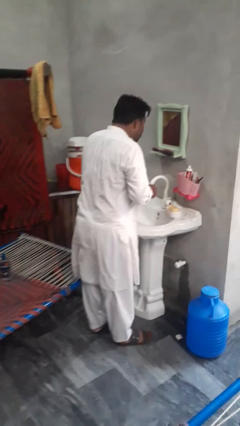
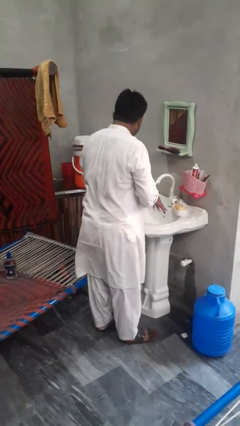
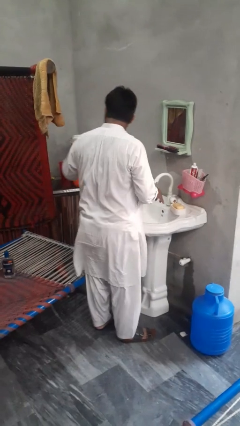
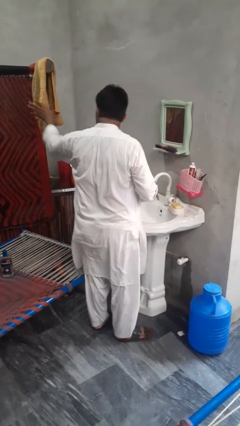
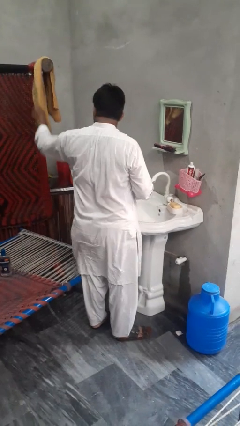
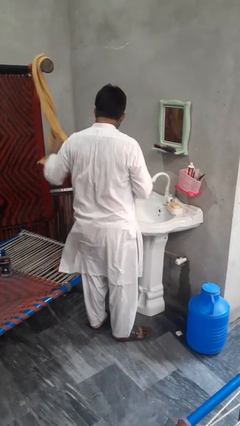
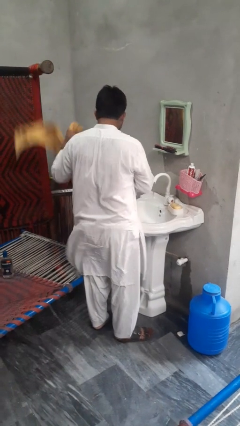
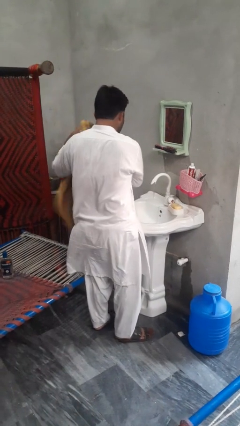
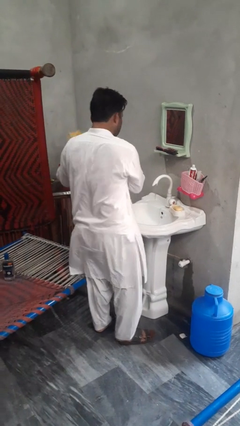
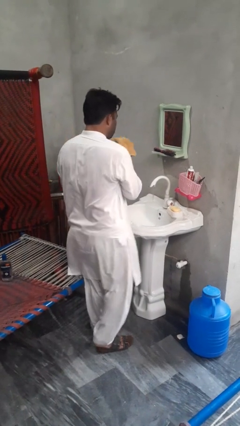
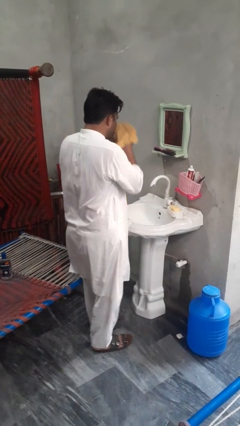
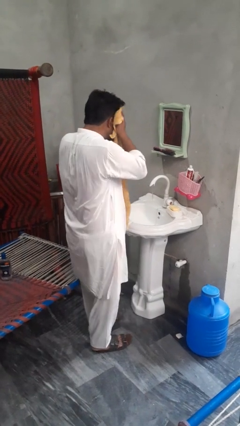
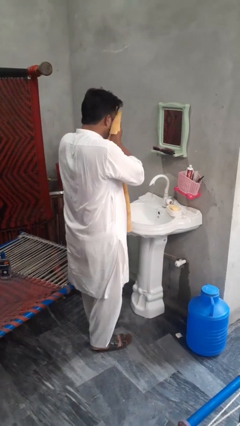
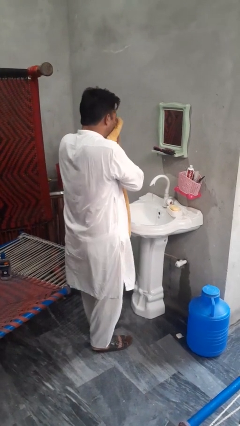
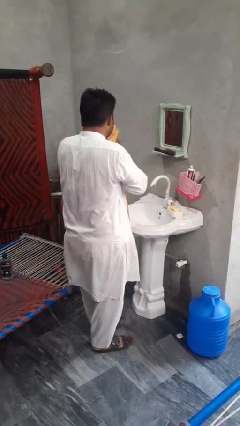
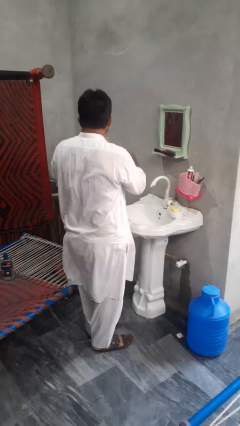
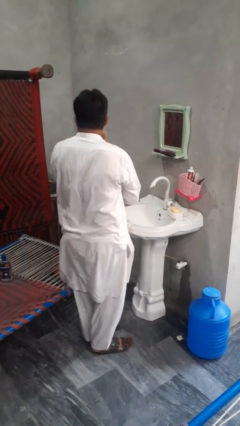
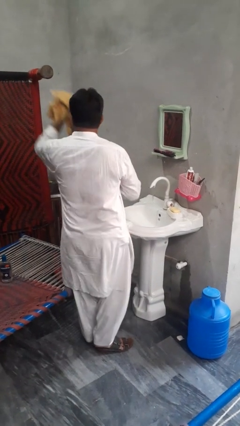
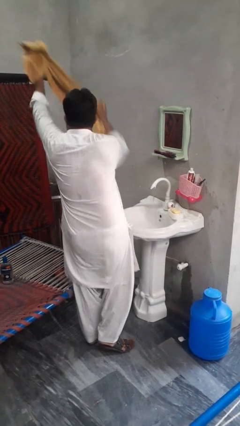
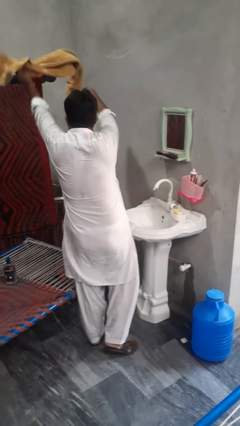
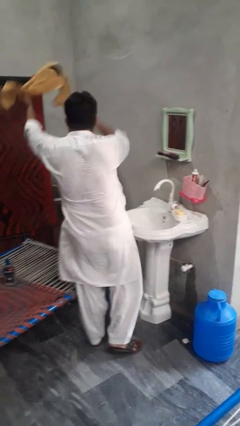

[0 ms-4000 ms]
person dries face with towel

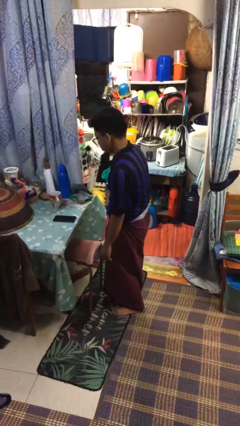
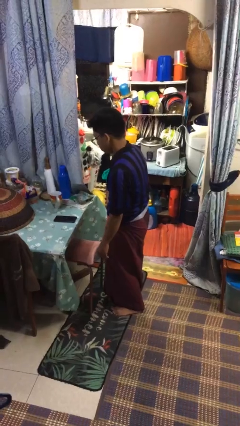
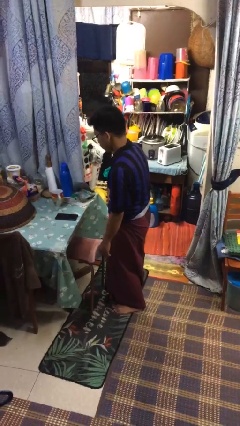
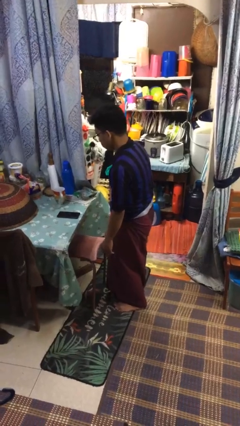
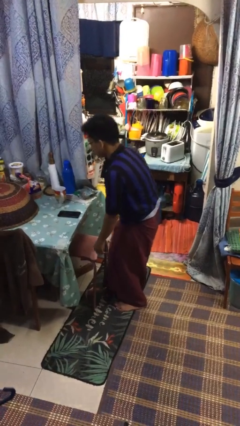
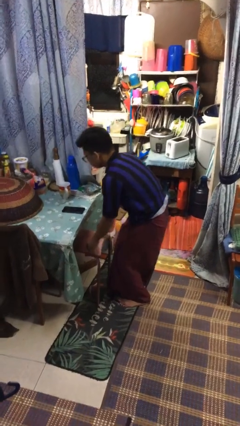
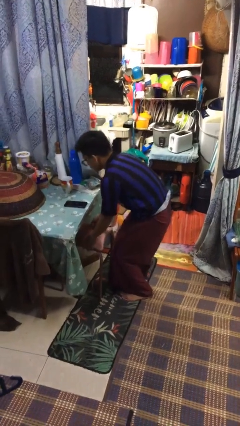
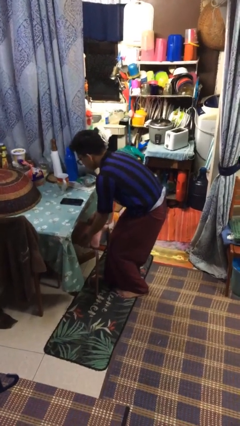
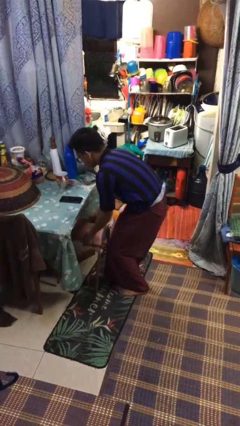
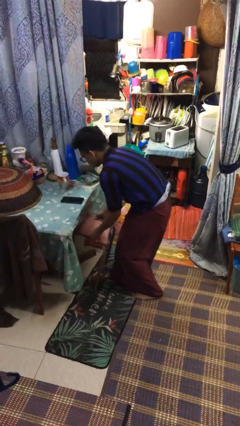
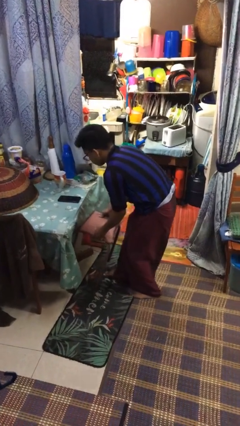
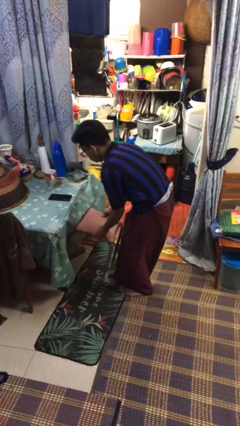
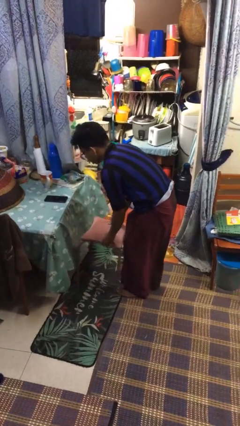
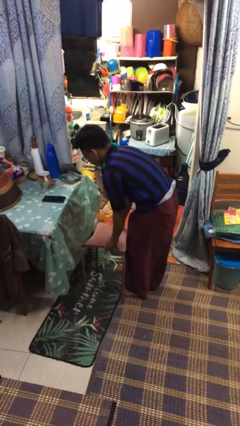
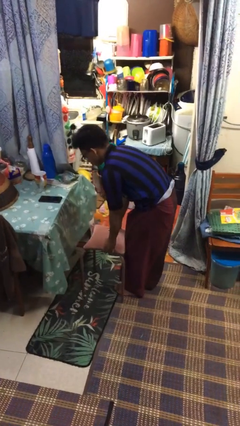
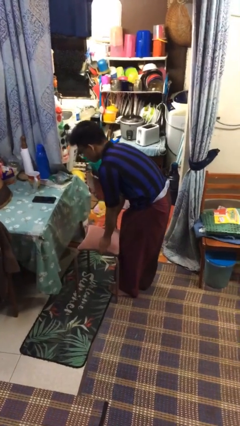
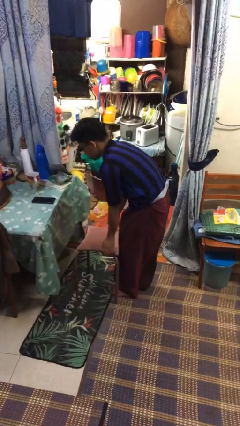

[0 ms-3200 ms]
person pulls out chair

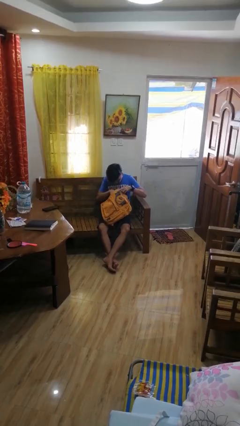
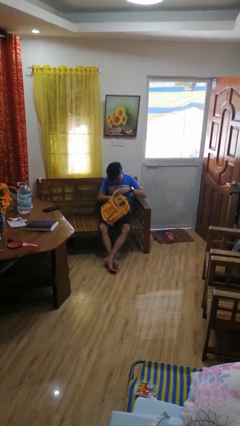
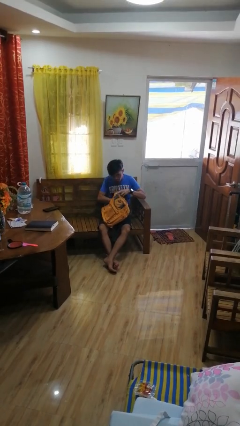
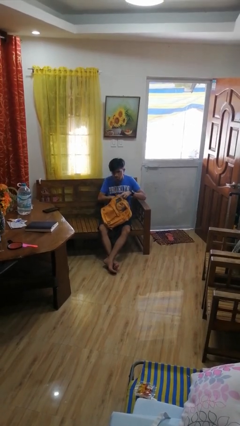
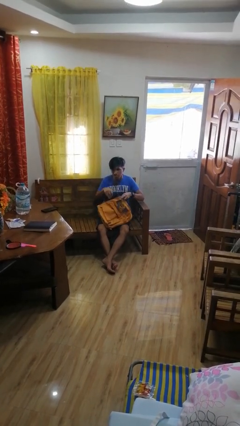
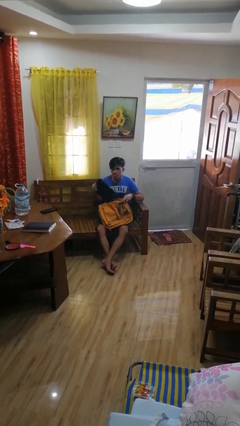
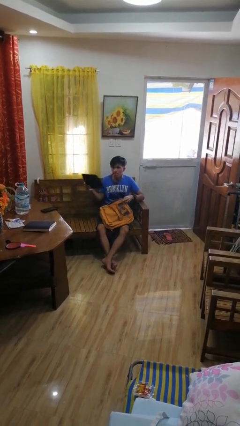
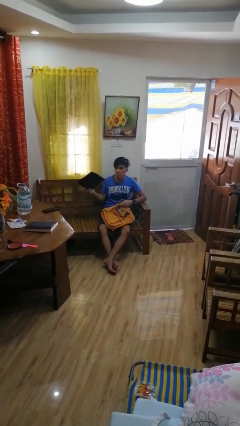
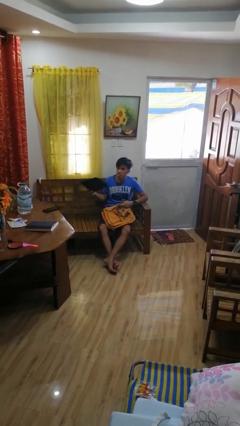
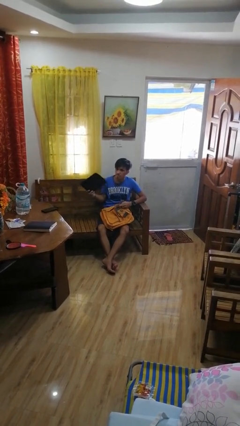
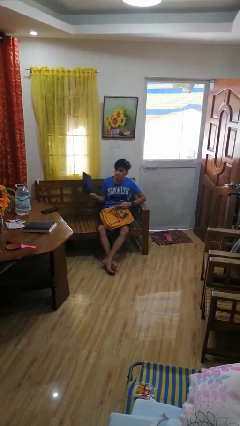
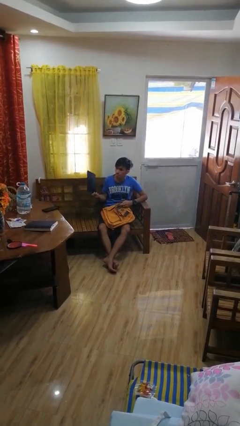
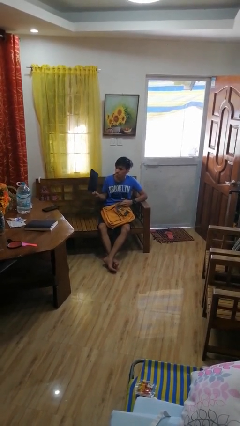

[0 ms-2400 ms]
person takes object from backpack

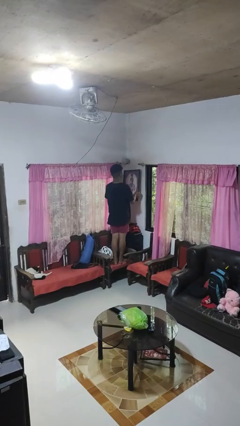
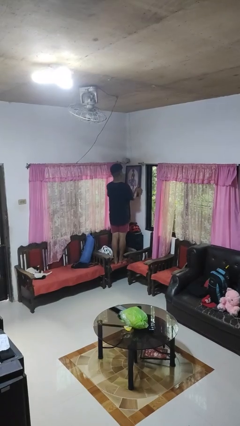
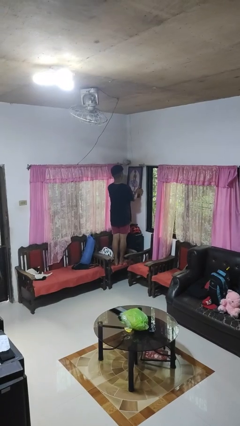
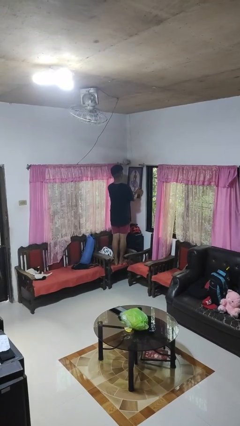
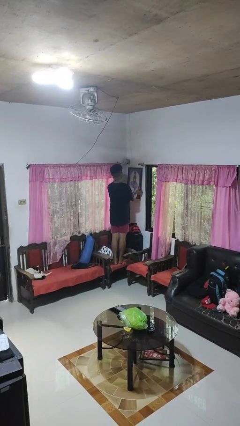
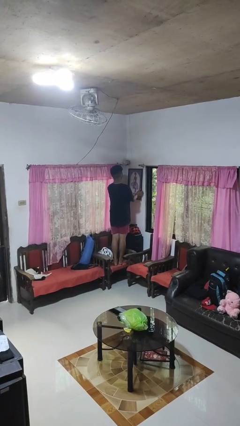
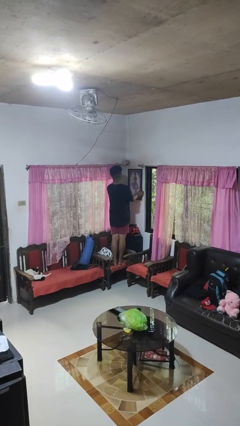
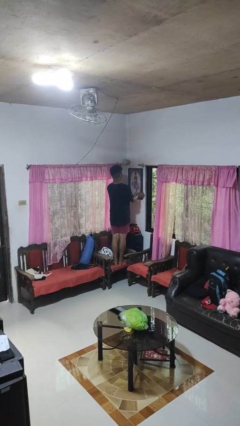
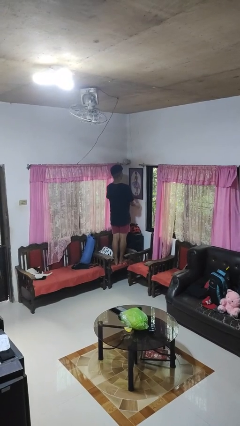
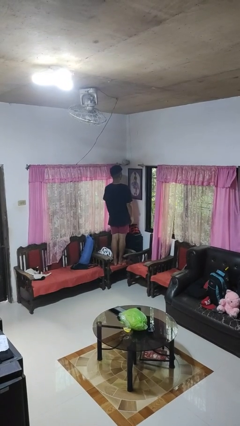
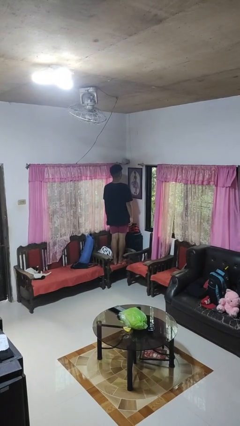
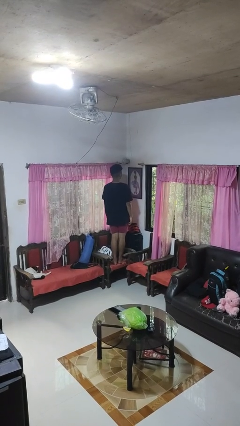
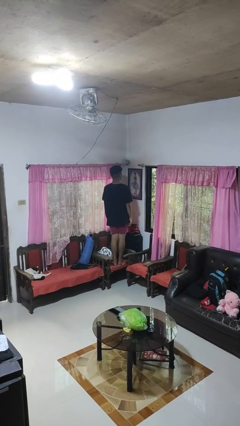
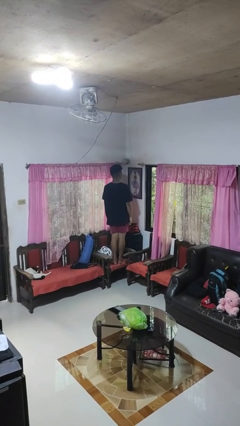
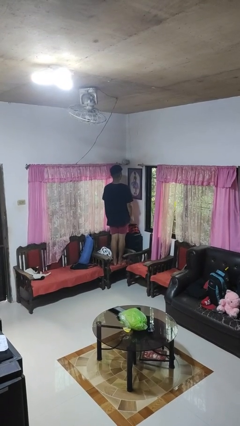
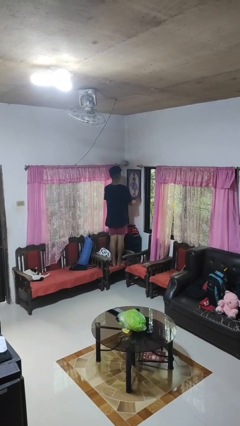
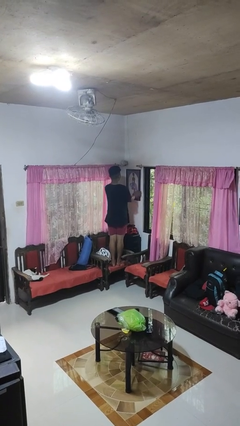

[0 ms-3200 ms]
person puts up picture frame

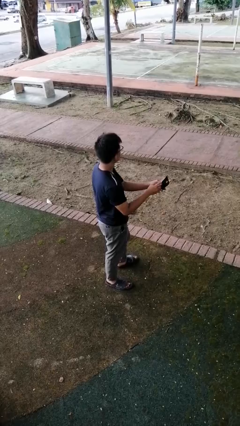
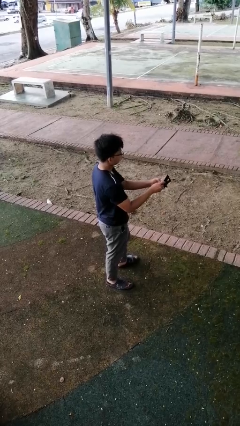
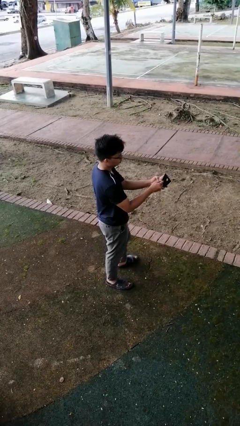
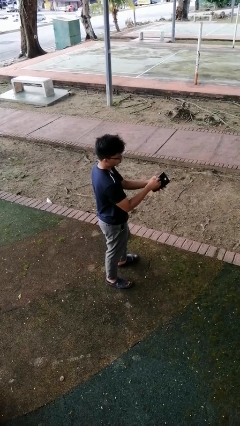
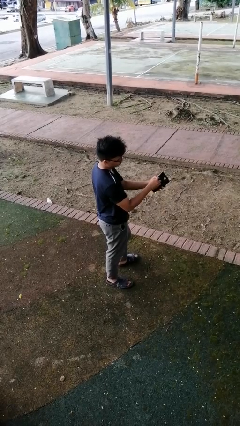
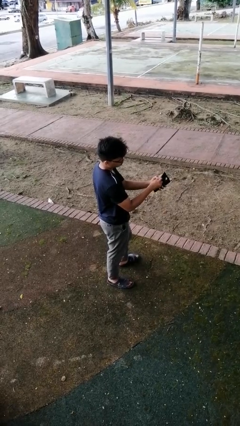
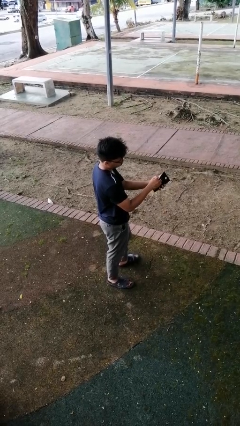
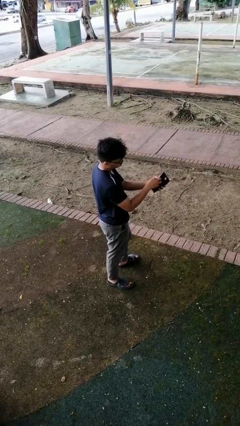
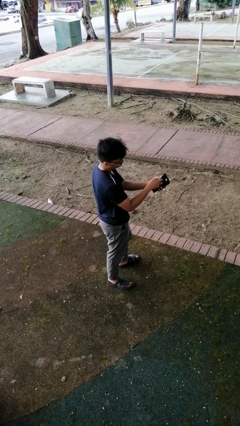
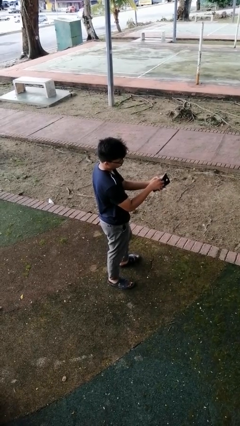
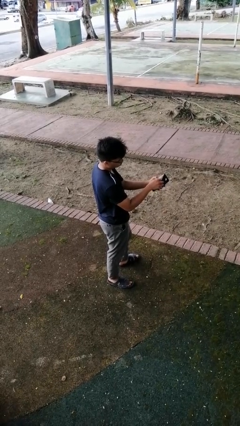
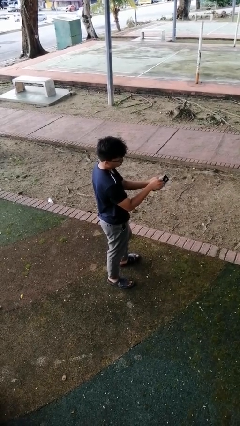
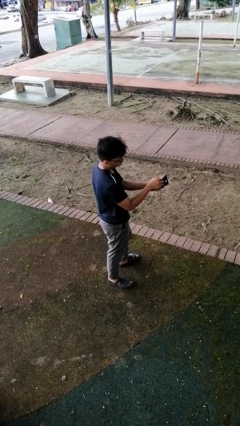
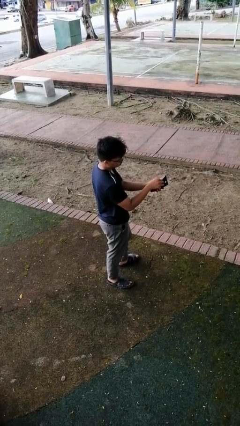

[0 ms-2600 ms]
person searches in purse

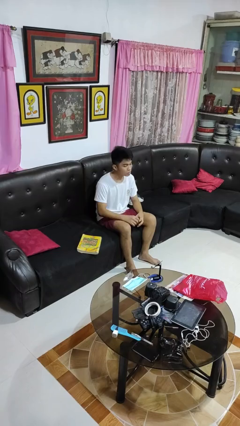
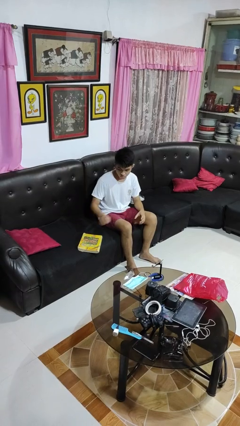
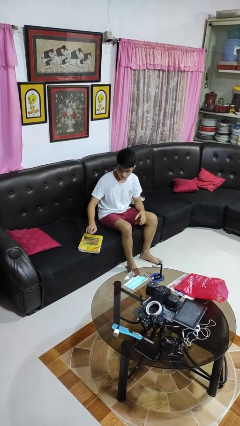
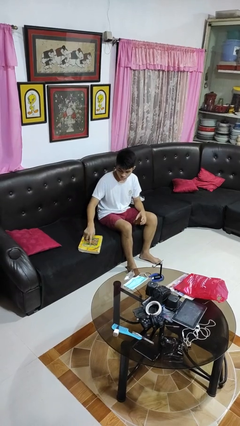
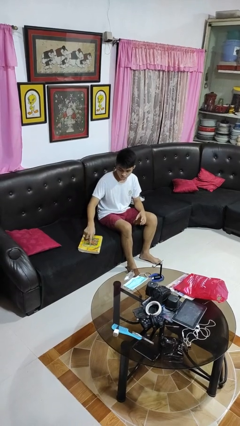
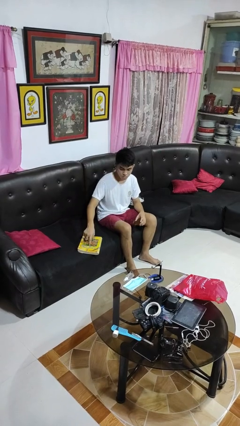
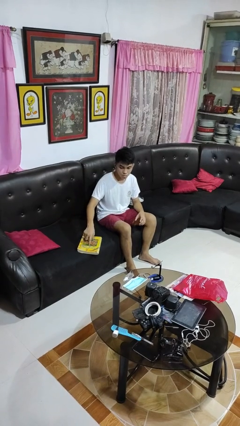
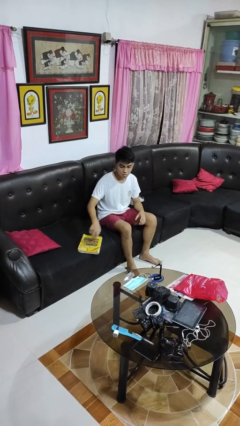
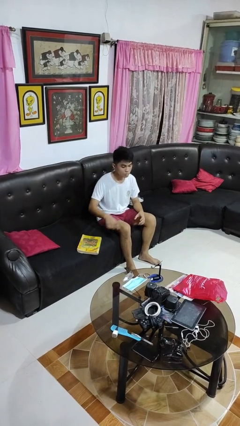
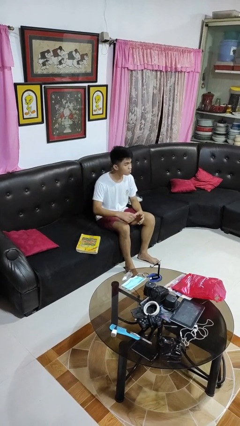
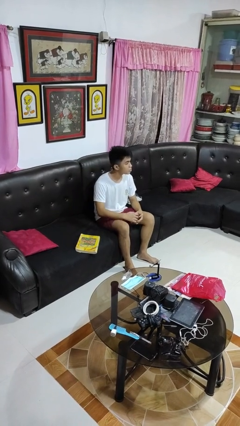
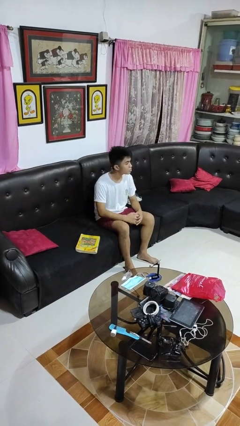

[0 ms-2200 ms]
person taps object with finger
